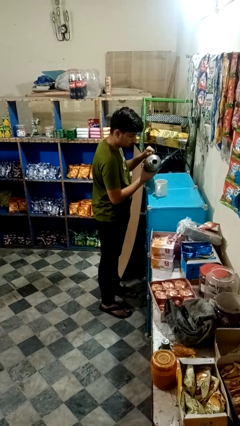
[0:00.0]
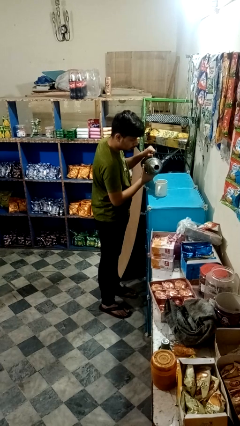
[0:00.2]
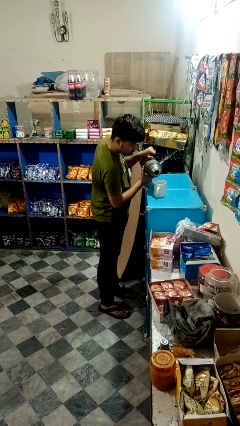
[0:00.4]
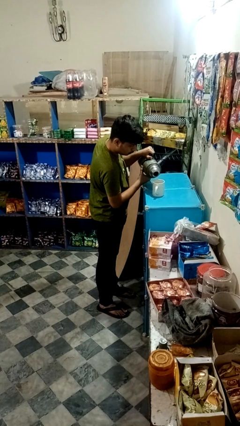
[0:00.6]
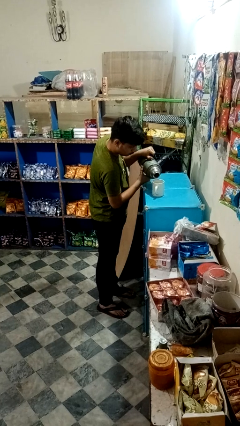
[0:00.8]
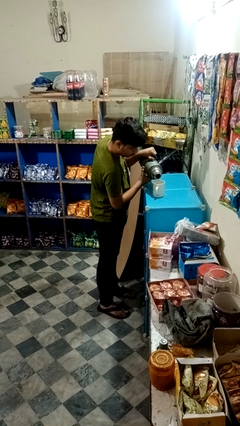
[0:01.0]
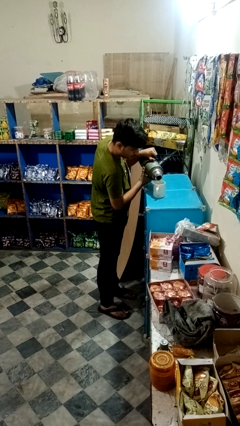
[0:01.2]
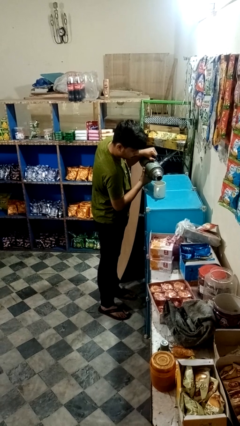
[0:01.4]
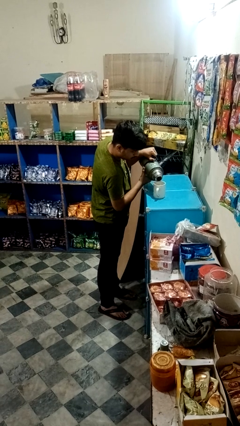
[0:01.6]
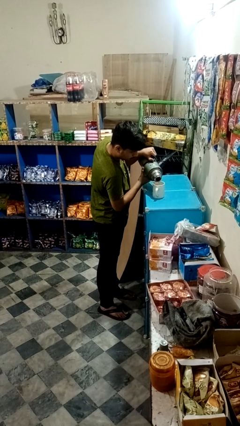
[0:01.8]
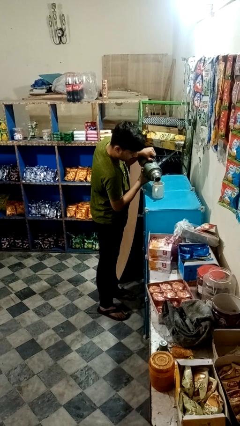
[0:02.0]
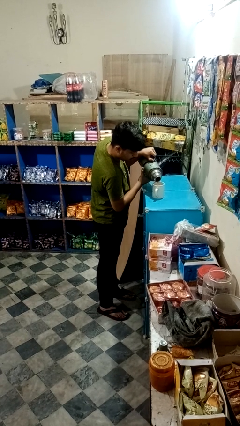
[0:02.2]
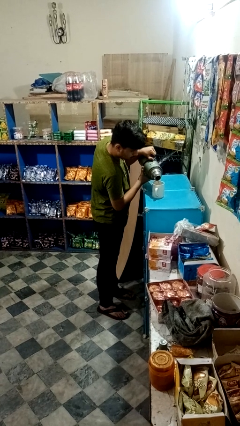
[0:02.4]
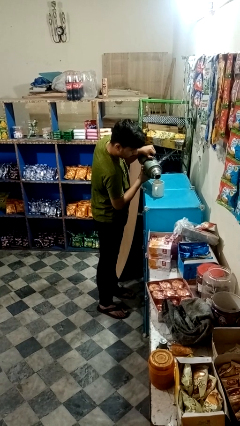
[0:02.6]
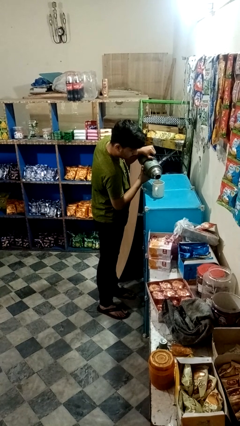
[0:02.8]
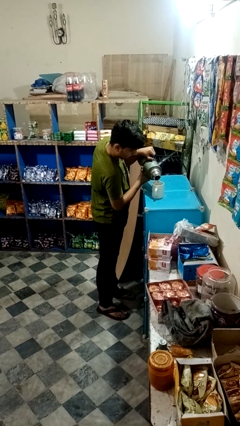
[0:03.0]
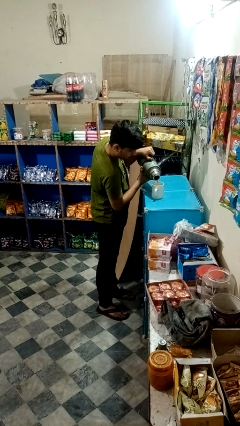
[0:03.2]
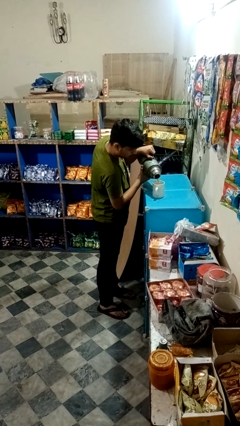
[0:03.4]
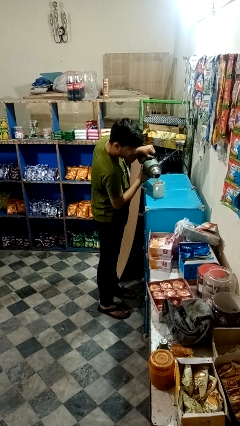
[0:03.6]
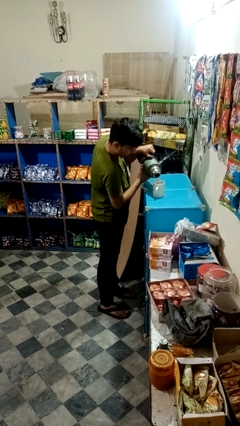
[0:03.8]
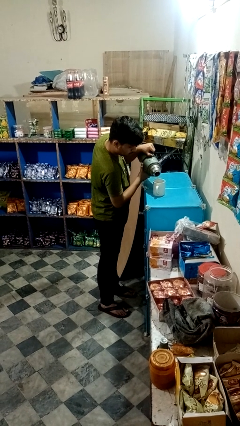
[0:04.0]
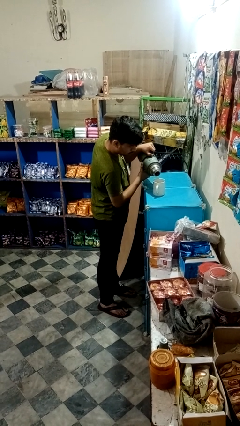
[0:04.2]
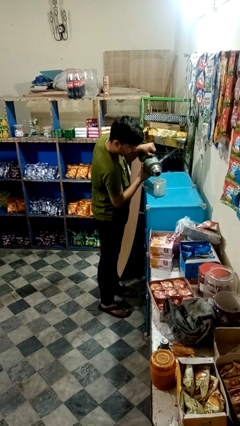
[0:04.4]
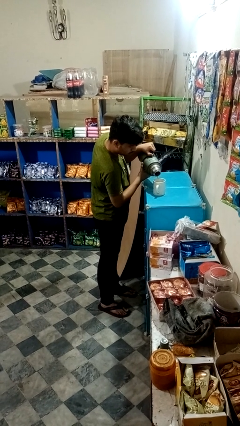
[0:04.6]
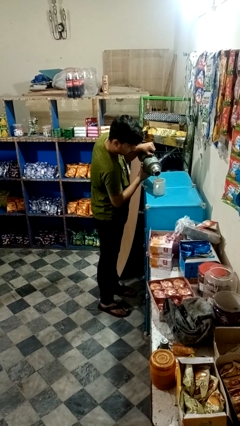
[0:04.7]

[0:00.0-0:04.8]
person pours coffee into mug

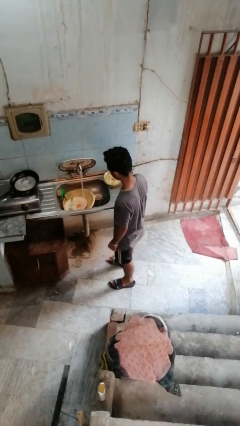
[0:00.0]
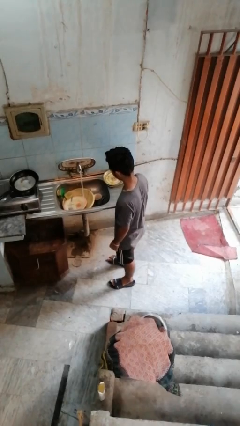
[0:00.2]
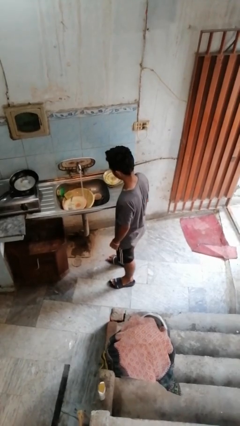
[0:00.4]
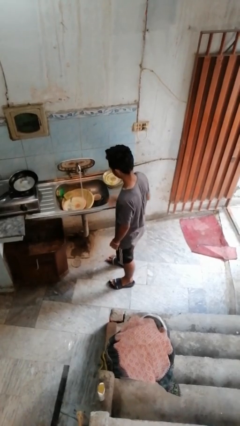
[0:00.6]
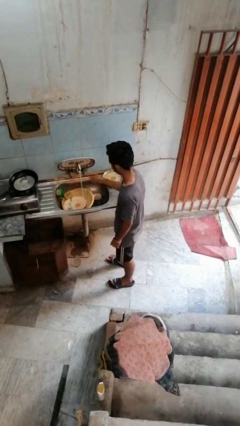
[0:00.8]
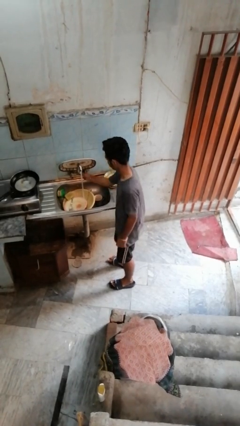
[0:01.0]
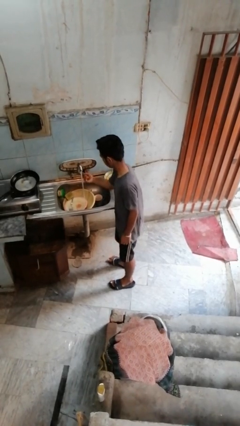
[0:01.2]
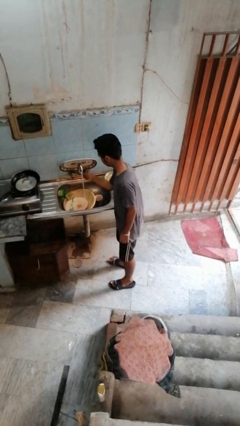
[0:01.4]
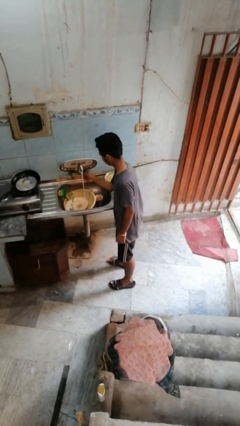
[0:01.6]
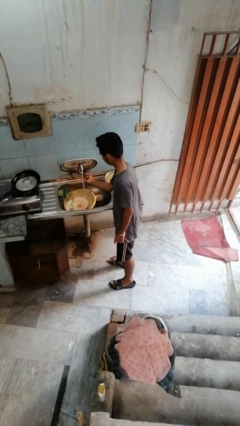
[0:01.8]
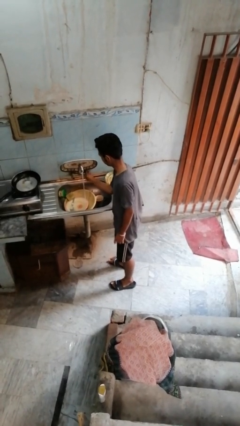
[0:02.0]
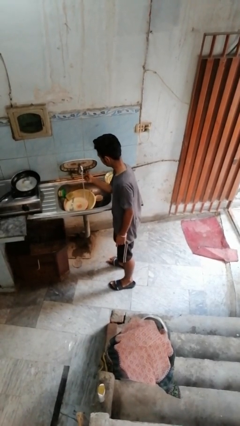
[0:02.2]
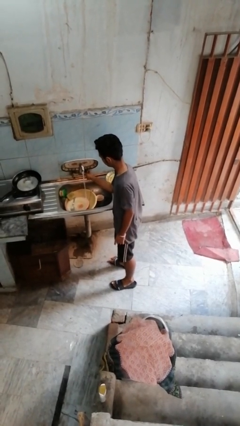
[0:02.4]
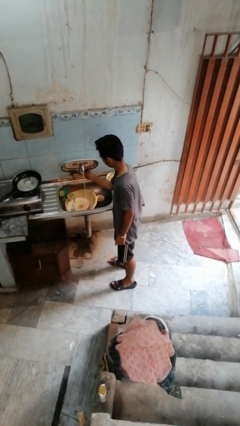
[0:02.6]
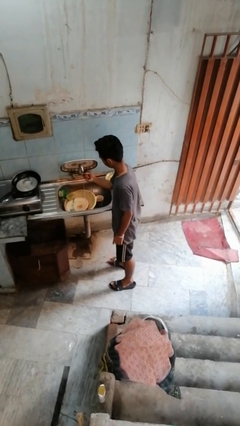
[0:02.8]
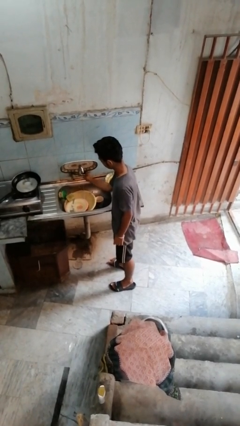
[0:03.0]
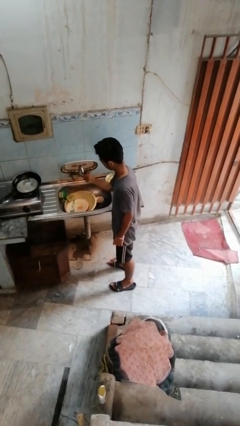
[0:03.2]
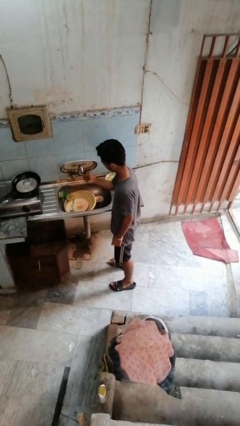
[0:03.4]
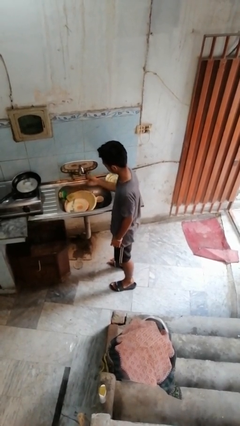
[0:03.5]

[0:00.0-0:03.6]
person turns off faucet

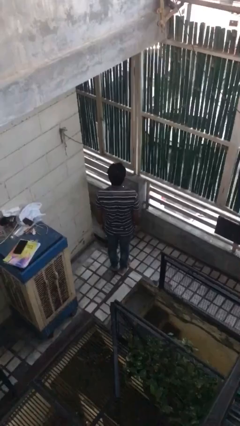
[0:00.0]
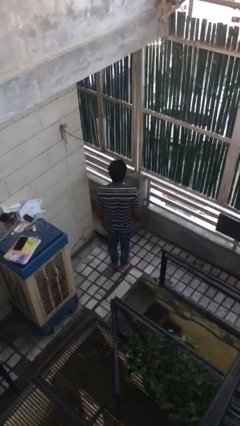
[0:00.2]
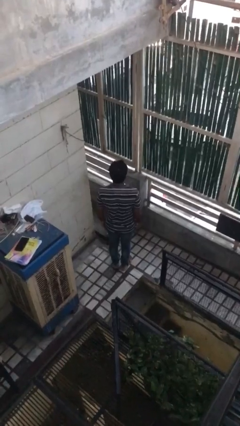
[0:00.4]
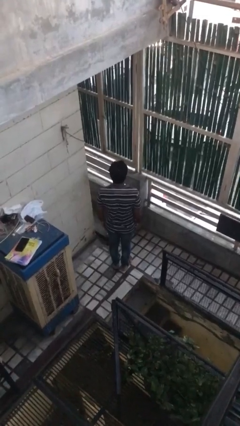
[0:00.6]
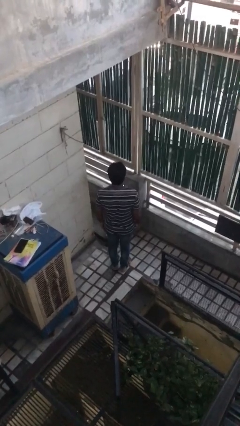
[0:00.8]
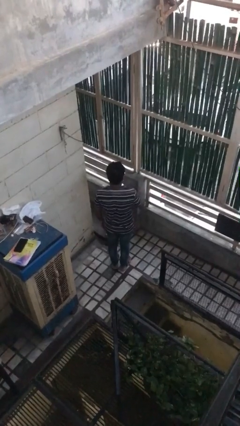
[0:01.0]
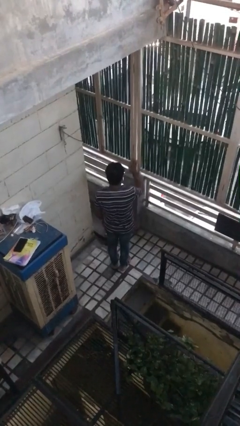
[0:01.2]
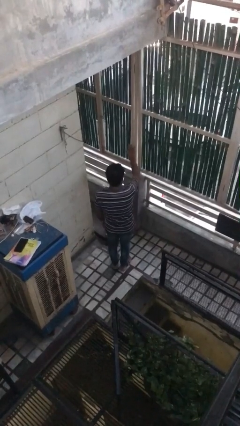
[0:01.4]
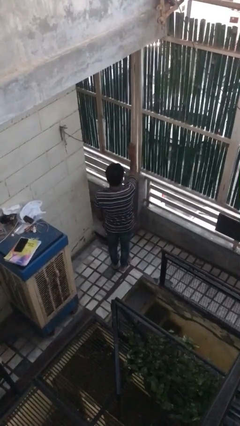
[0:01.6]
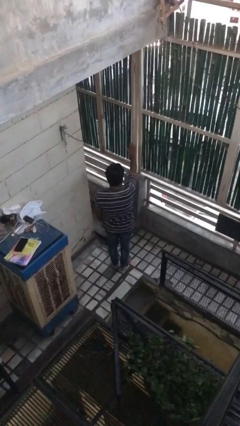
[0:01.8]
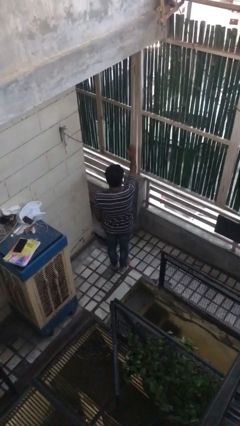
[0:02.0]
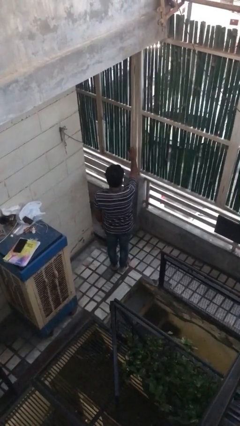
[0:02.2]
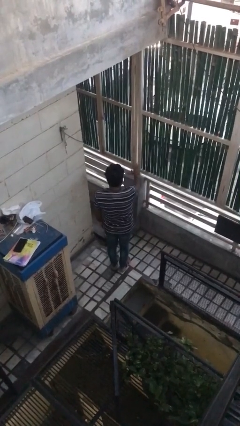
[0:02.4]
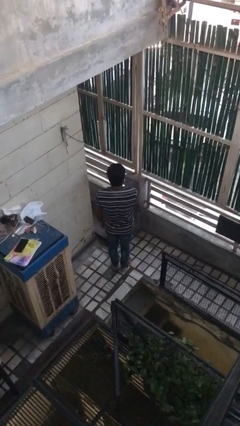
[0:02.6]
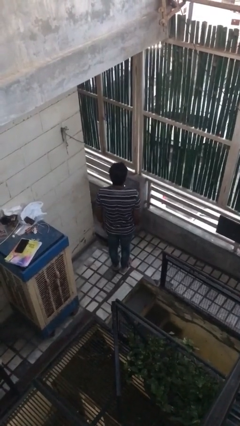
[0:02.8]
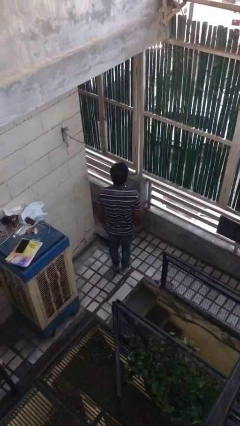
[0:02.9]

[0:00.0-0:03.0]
person gestures stop

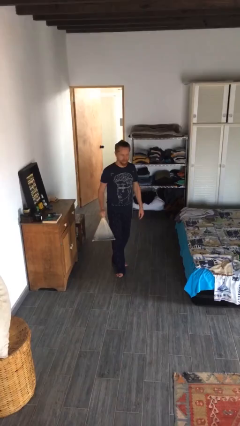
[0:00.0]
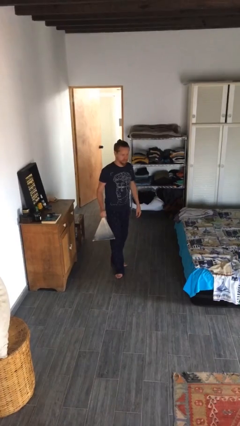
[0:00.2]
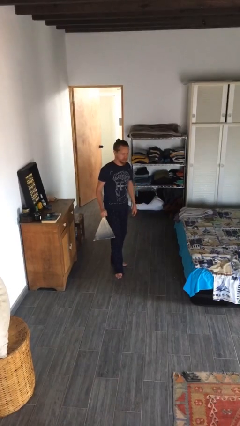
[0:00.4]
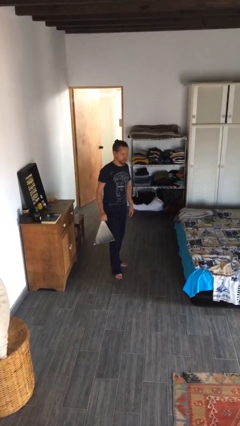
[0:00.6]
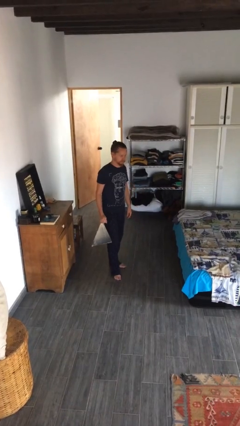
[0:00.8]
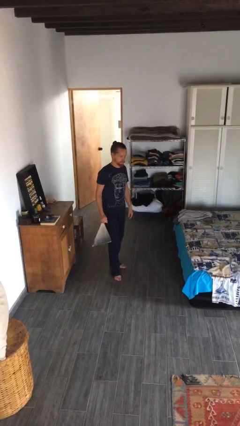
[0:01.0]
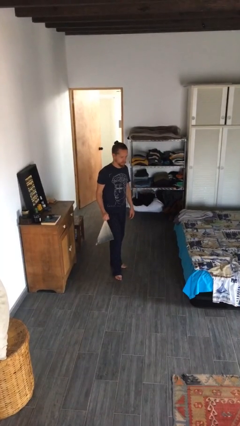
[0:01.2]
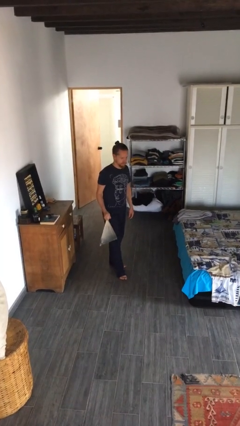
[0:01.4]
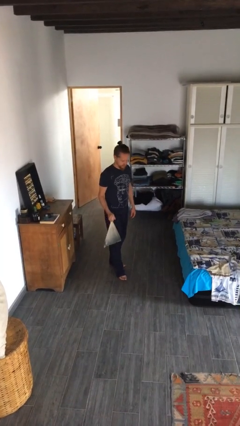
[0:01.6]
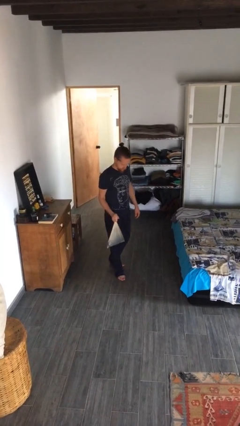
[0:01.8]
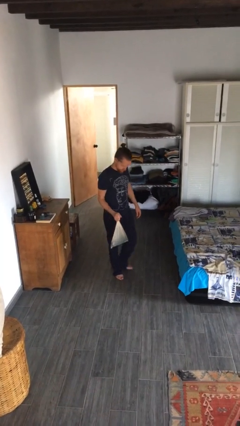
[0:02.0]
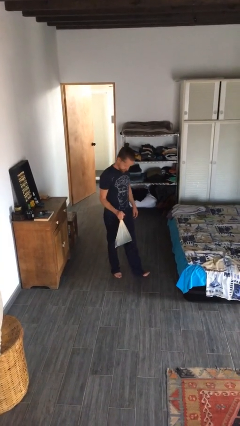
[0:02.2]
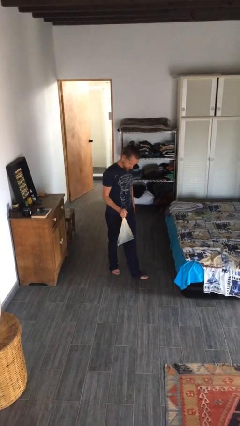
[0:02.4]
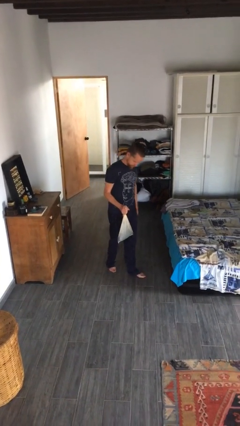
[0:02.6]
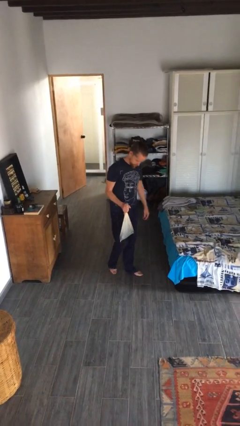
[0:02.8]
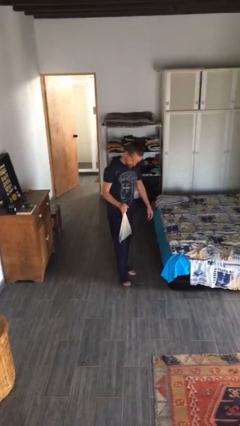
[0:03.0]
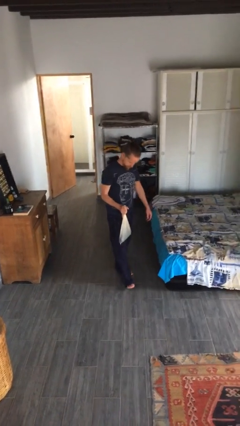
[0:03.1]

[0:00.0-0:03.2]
person carries groceries

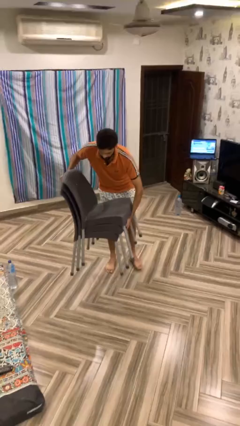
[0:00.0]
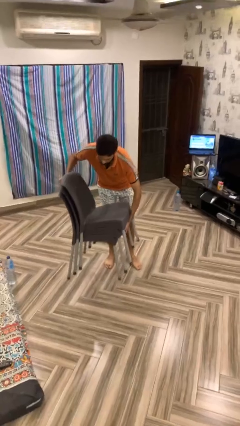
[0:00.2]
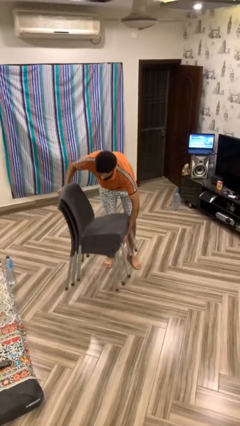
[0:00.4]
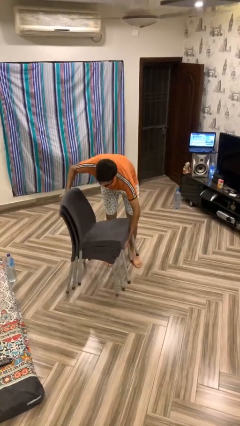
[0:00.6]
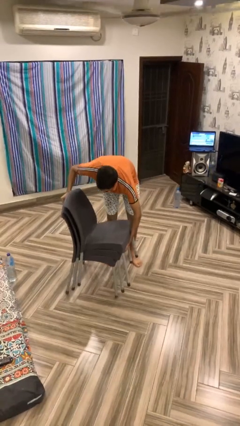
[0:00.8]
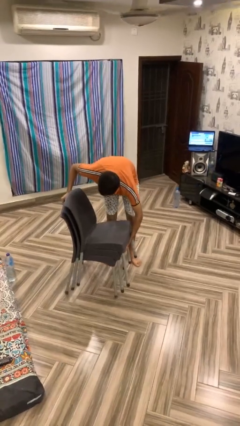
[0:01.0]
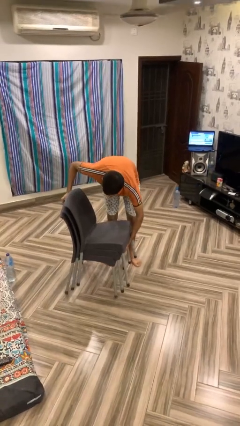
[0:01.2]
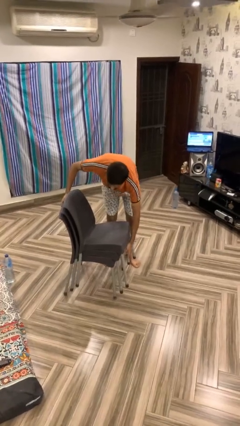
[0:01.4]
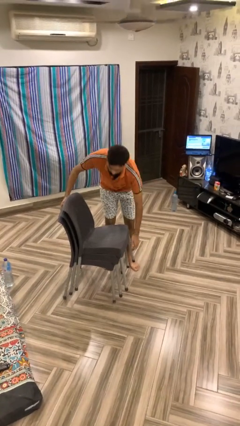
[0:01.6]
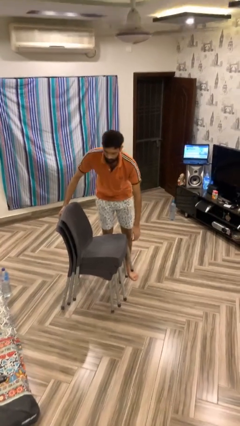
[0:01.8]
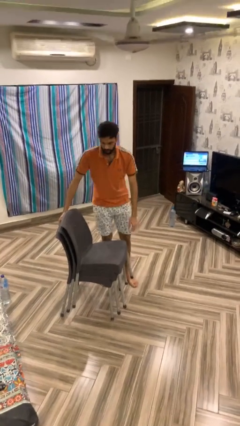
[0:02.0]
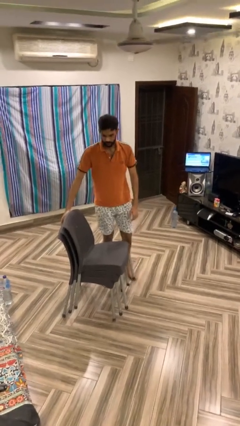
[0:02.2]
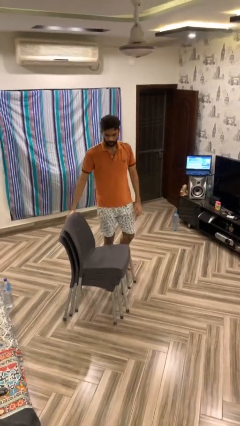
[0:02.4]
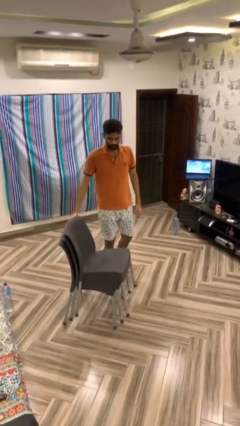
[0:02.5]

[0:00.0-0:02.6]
person puts down object on floor

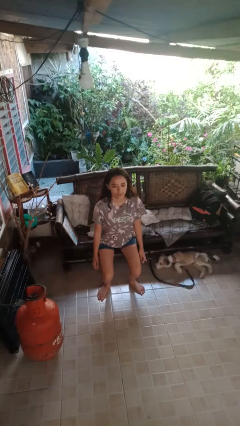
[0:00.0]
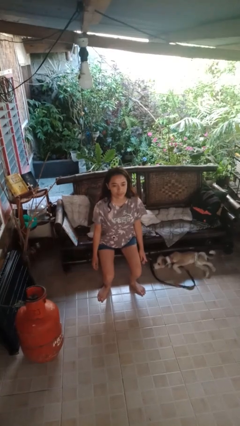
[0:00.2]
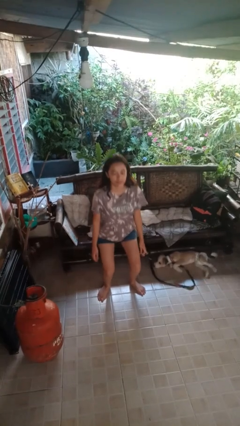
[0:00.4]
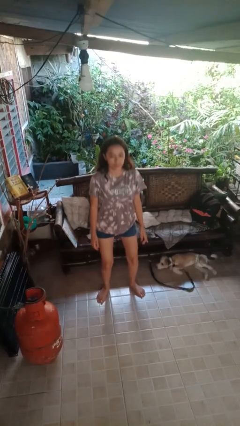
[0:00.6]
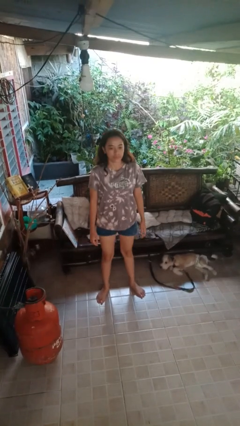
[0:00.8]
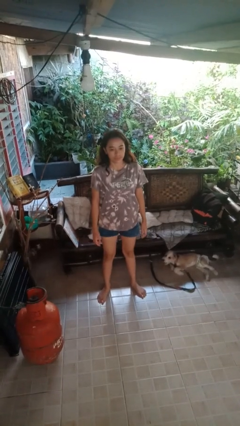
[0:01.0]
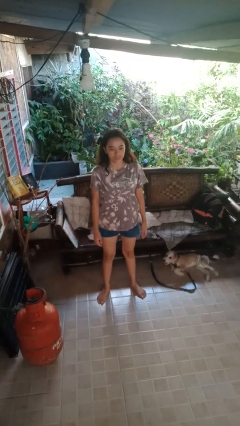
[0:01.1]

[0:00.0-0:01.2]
person stands up
